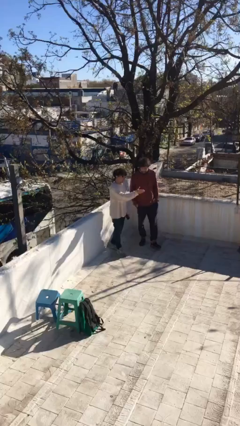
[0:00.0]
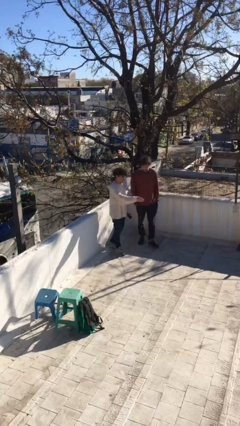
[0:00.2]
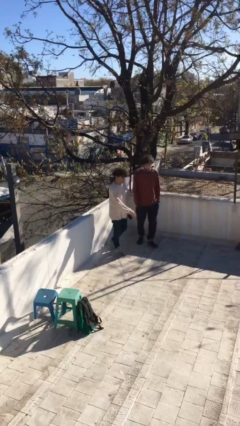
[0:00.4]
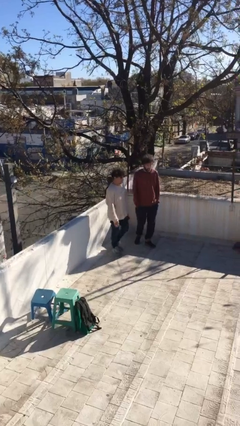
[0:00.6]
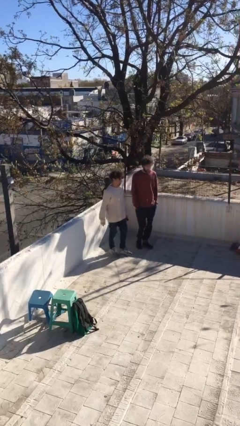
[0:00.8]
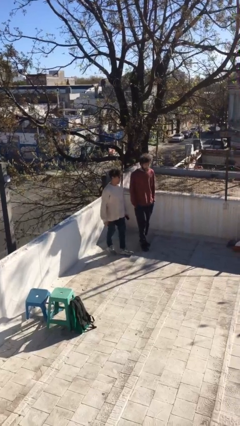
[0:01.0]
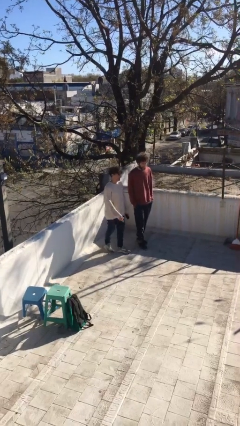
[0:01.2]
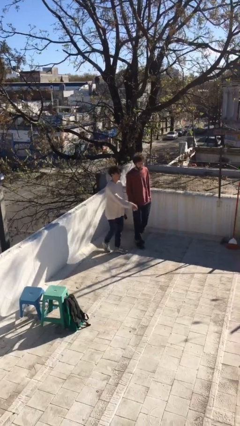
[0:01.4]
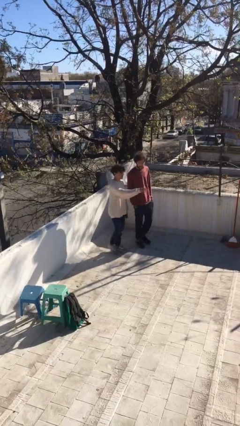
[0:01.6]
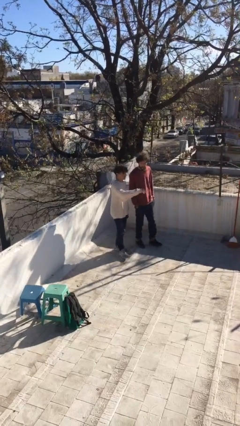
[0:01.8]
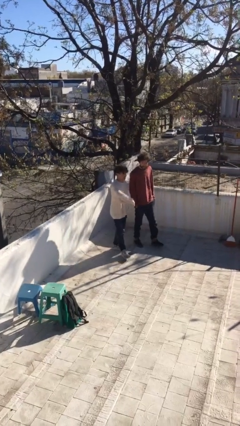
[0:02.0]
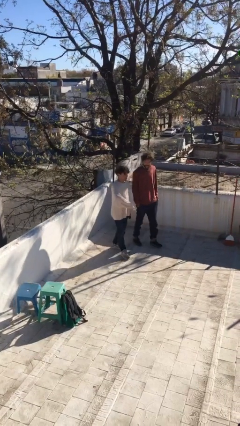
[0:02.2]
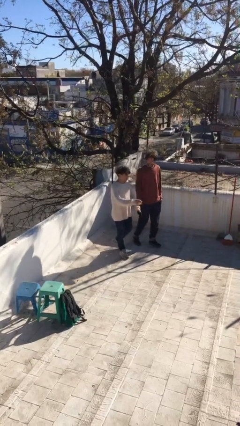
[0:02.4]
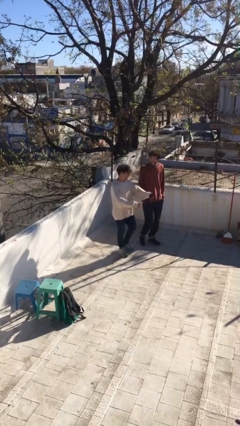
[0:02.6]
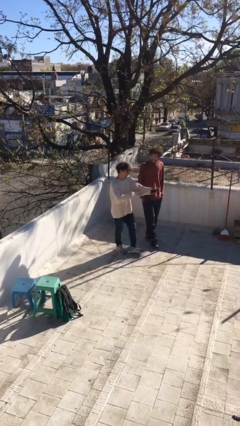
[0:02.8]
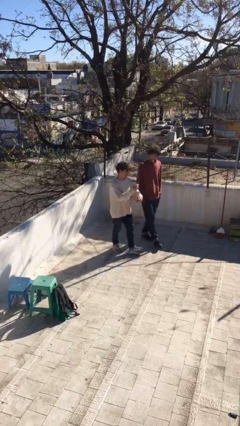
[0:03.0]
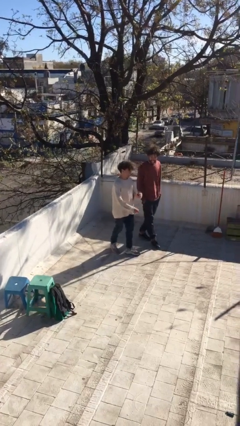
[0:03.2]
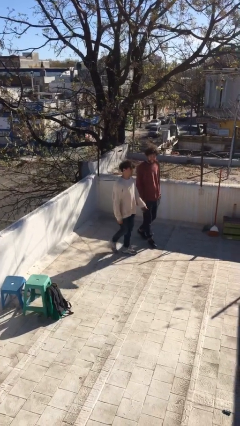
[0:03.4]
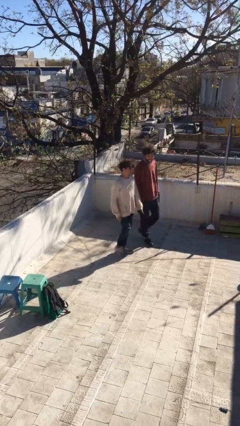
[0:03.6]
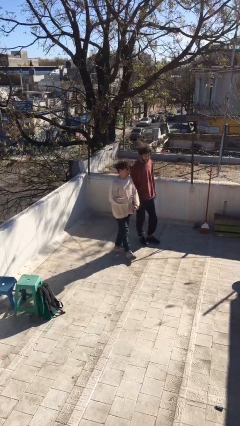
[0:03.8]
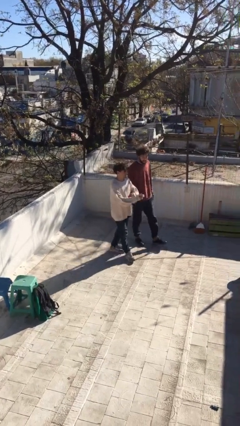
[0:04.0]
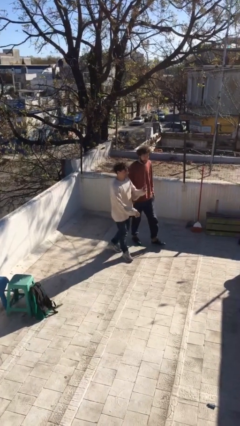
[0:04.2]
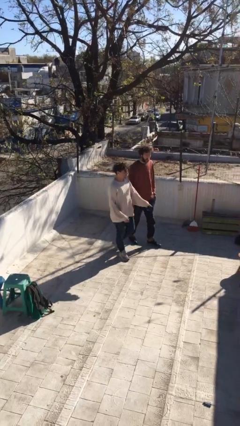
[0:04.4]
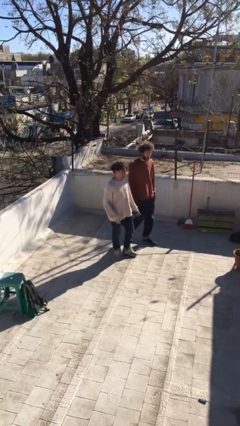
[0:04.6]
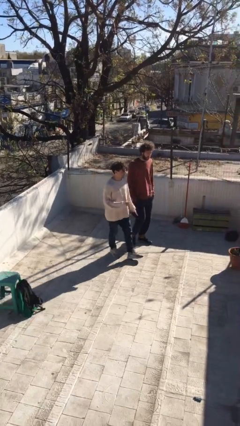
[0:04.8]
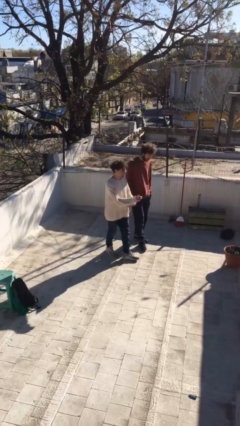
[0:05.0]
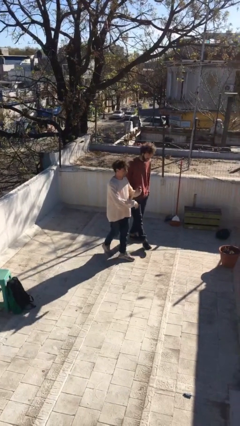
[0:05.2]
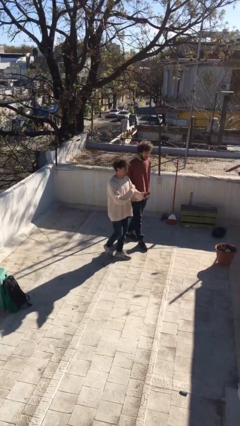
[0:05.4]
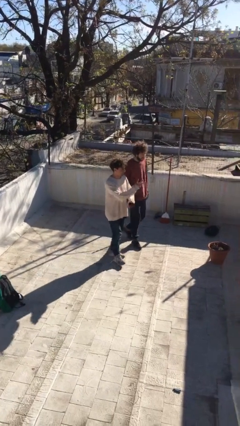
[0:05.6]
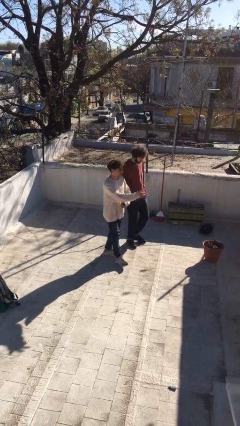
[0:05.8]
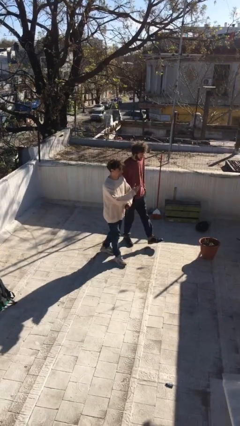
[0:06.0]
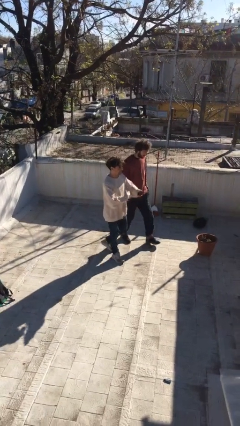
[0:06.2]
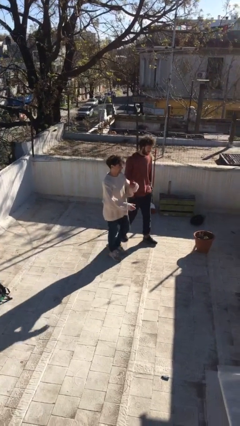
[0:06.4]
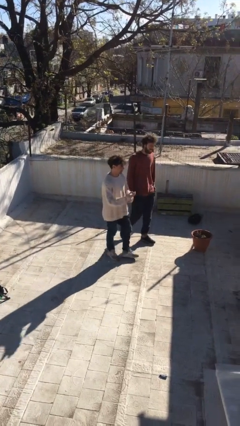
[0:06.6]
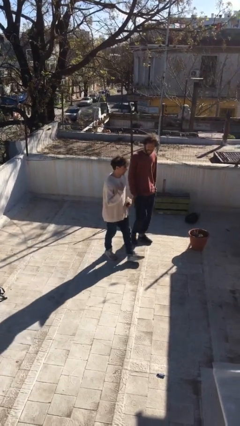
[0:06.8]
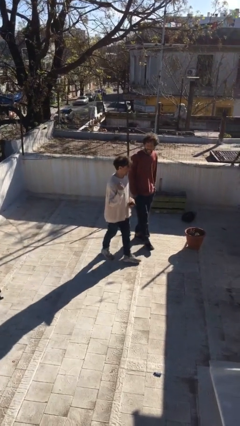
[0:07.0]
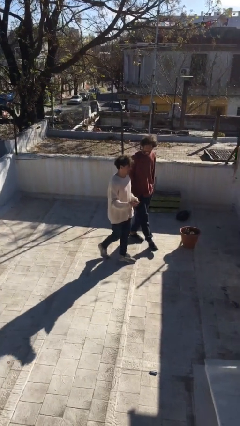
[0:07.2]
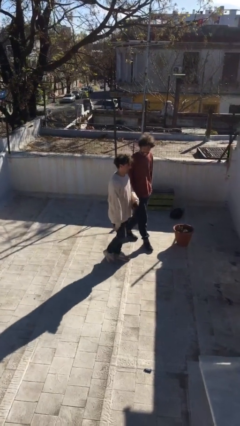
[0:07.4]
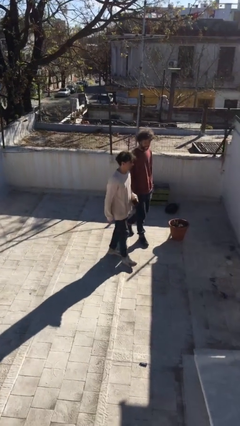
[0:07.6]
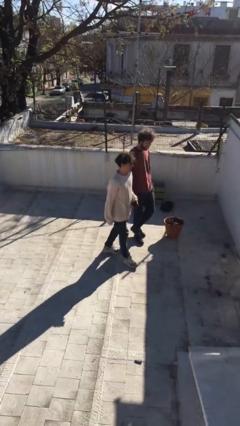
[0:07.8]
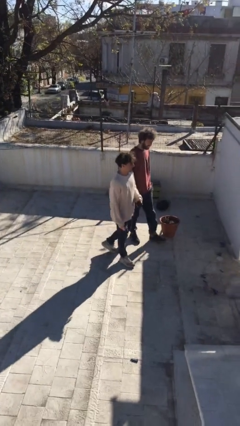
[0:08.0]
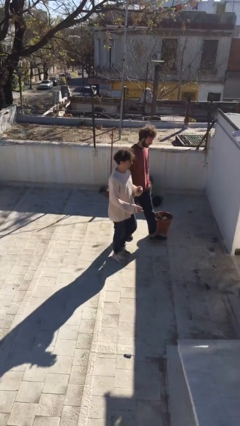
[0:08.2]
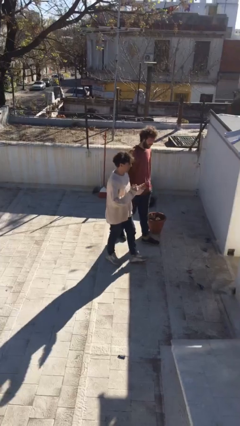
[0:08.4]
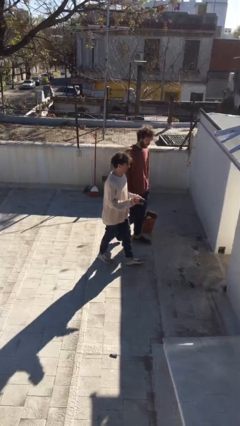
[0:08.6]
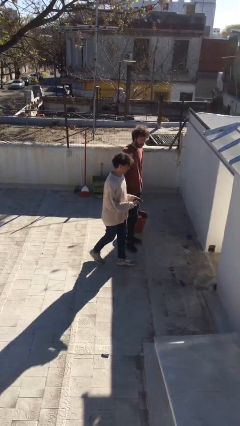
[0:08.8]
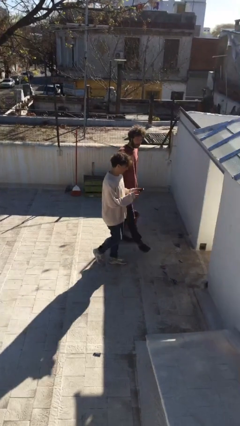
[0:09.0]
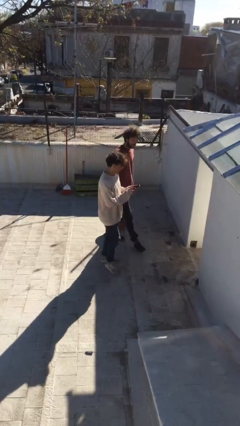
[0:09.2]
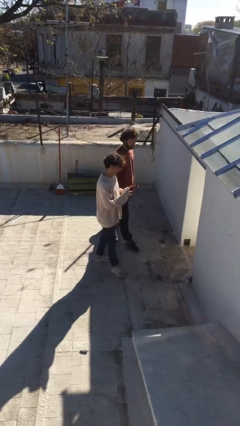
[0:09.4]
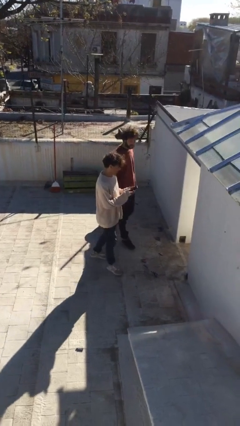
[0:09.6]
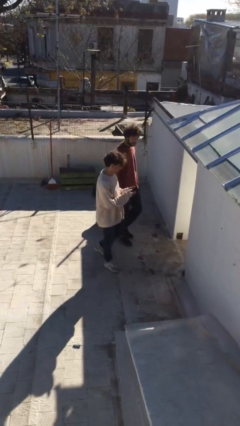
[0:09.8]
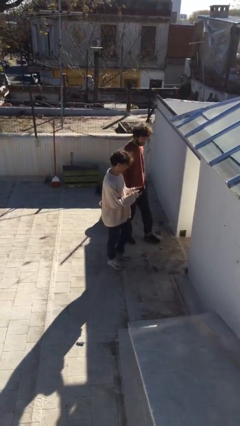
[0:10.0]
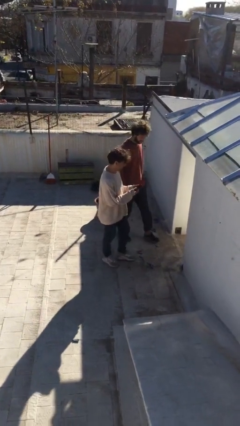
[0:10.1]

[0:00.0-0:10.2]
person talks to person

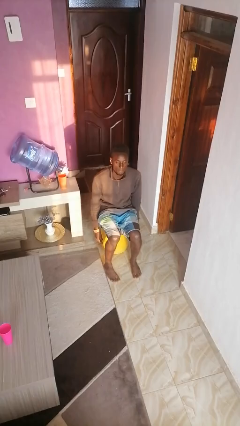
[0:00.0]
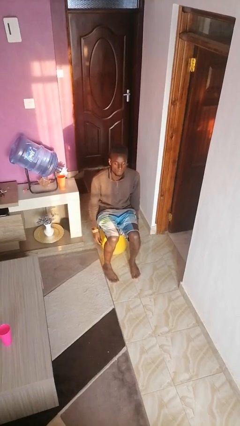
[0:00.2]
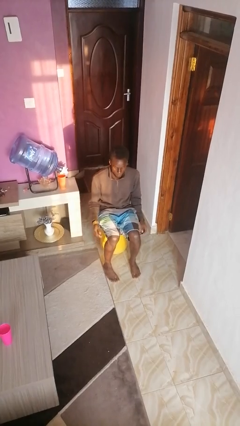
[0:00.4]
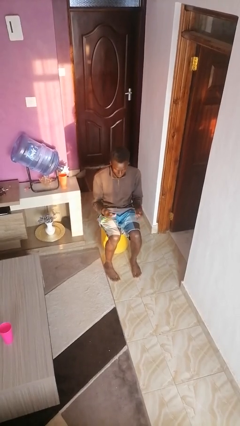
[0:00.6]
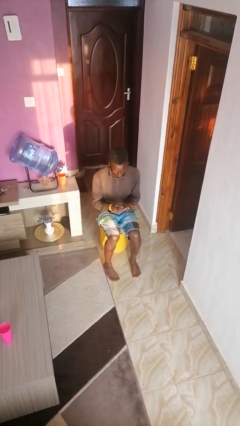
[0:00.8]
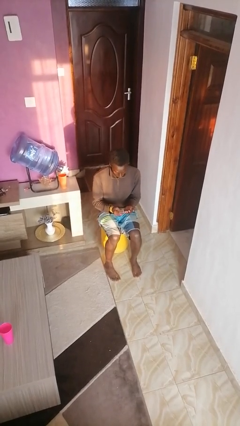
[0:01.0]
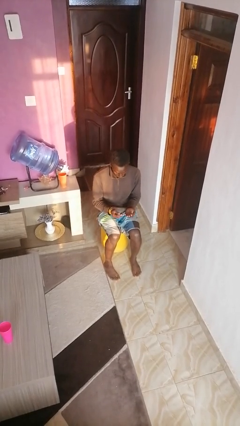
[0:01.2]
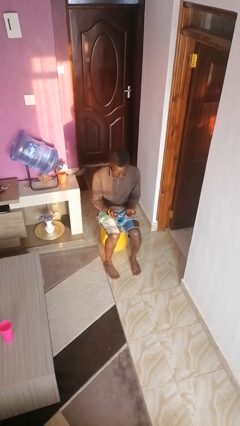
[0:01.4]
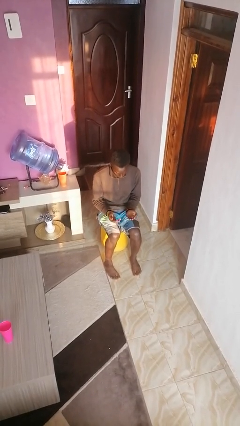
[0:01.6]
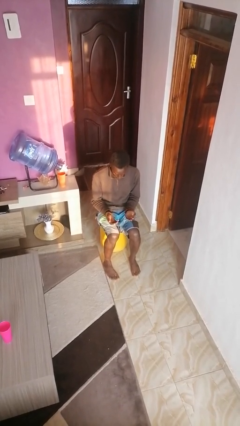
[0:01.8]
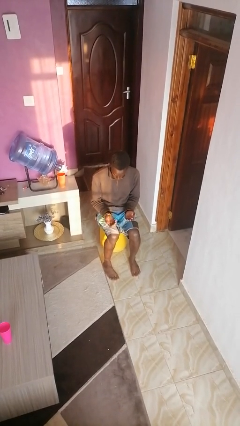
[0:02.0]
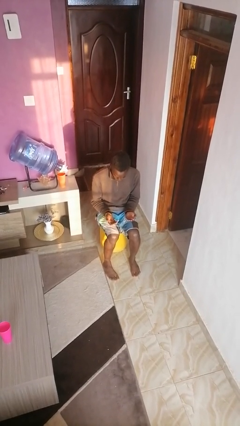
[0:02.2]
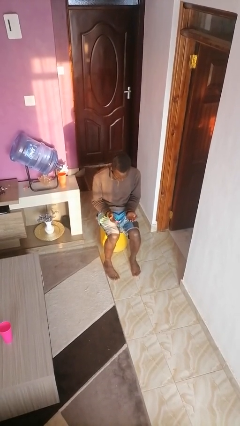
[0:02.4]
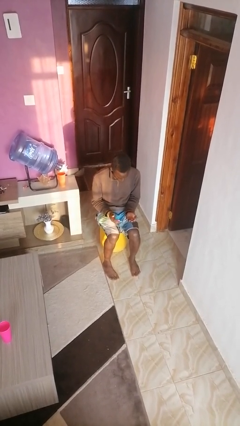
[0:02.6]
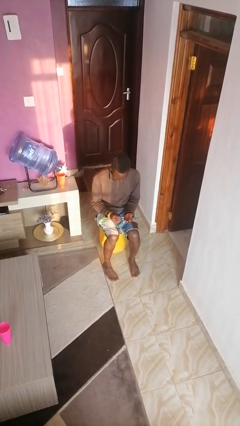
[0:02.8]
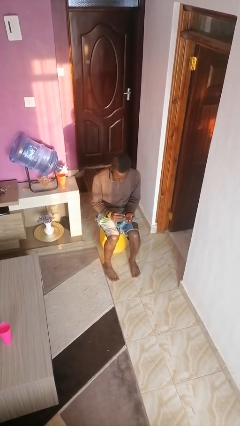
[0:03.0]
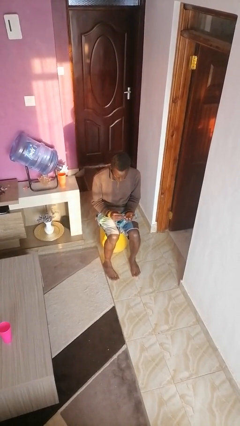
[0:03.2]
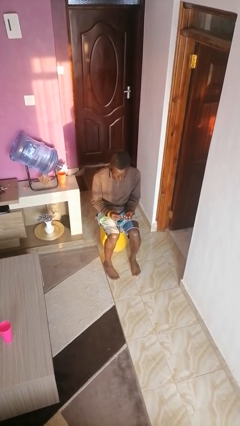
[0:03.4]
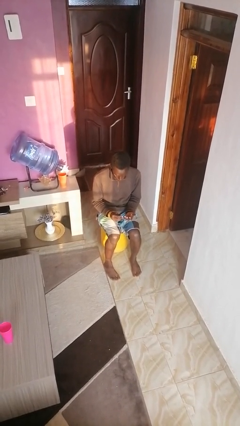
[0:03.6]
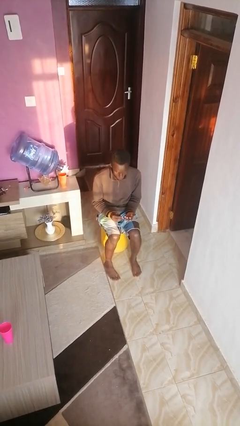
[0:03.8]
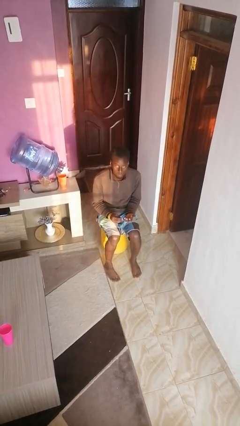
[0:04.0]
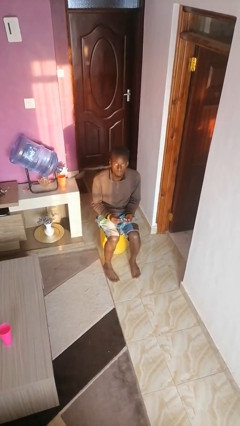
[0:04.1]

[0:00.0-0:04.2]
person looks at hands in lap

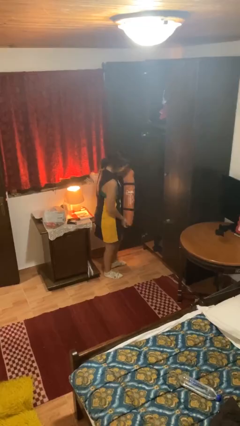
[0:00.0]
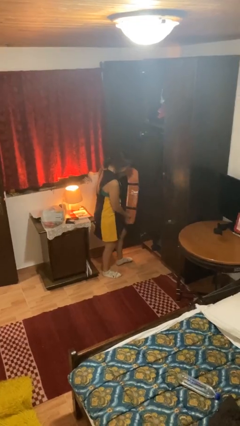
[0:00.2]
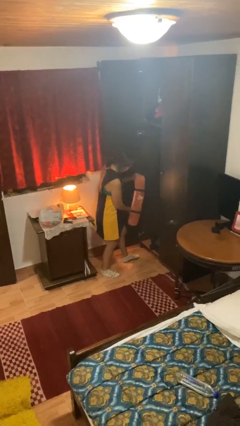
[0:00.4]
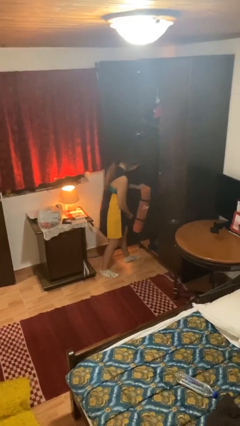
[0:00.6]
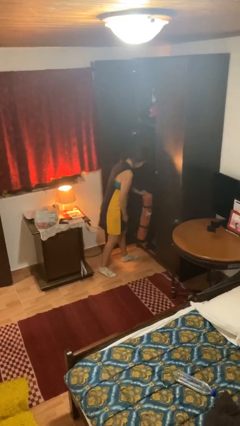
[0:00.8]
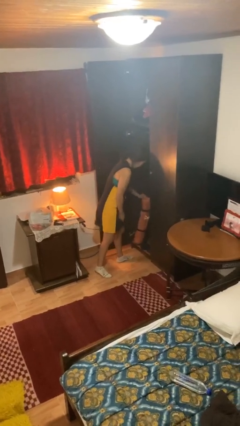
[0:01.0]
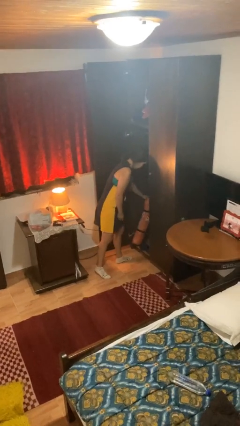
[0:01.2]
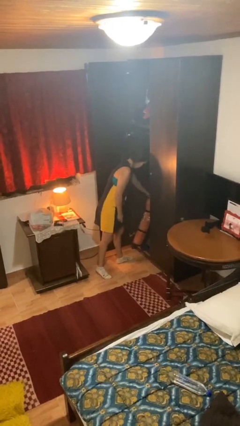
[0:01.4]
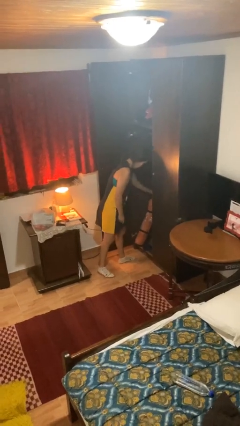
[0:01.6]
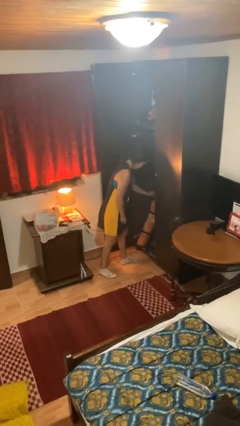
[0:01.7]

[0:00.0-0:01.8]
person puts down object into cabinet

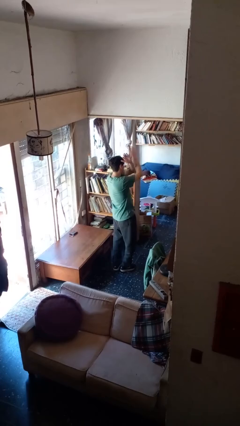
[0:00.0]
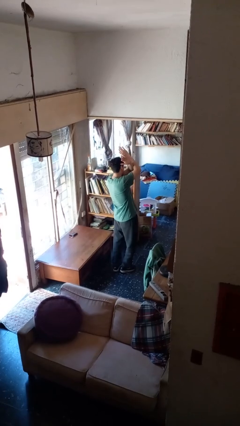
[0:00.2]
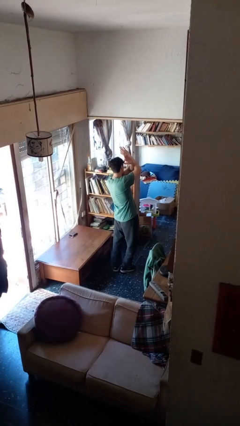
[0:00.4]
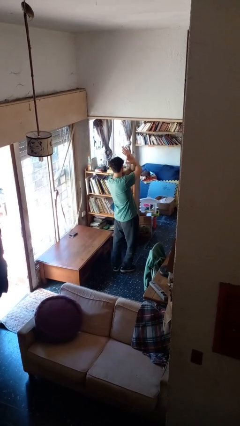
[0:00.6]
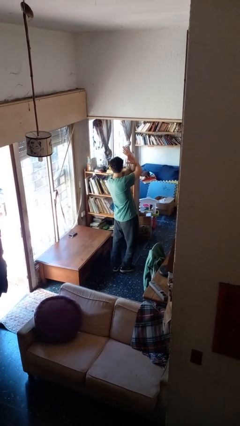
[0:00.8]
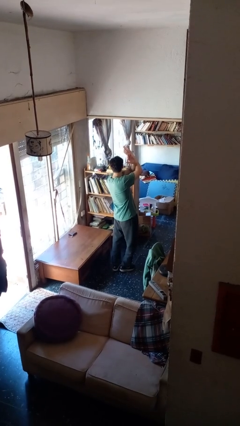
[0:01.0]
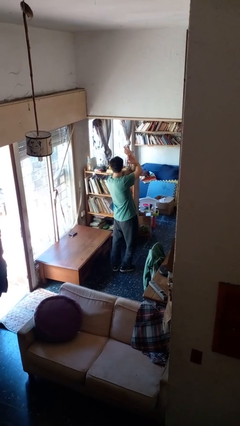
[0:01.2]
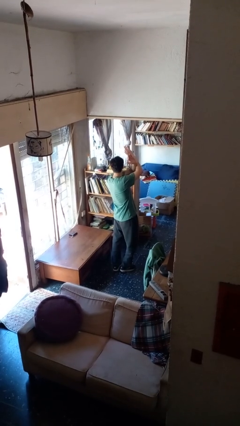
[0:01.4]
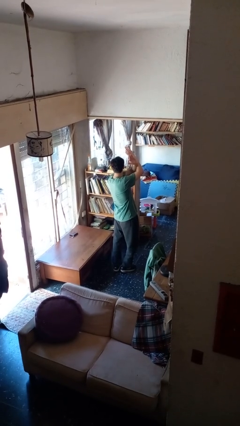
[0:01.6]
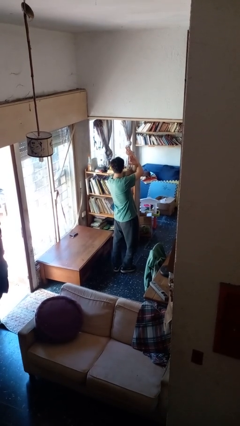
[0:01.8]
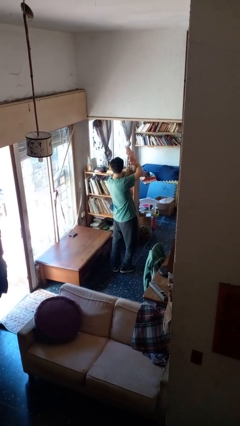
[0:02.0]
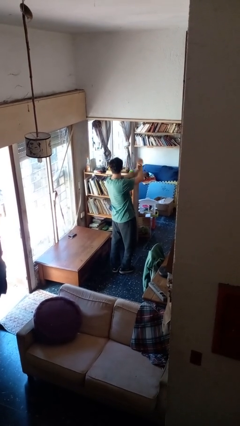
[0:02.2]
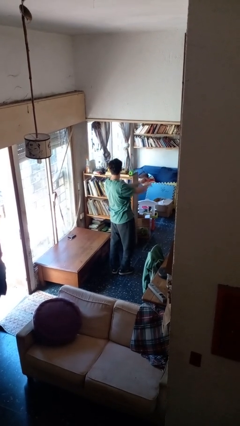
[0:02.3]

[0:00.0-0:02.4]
person gestures arms x
